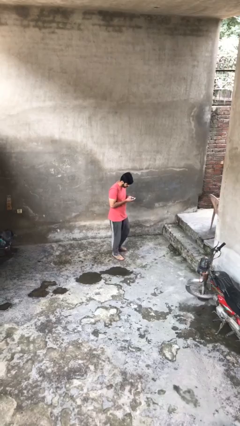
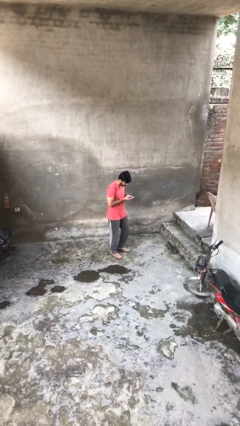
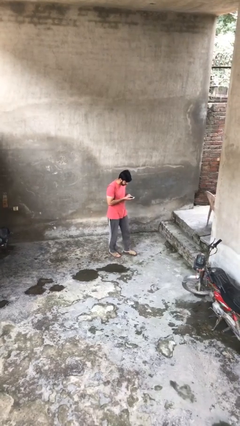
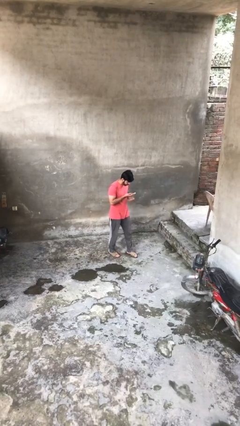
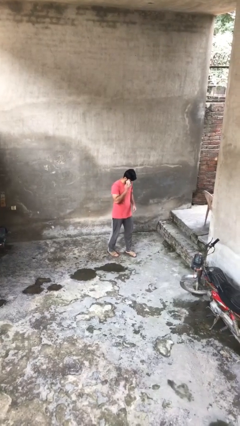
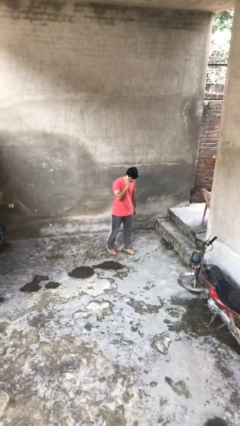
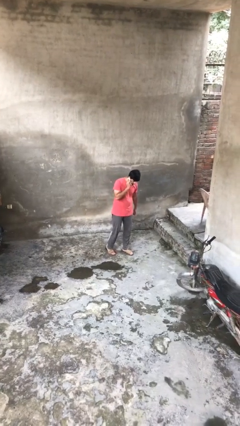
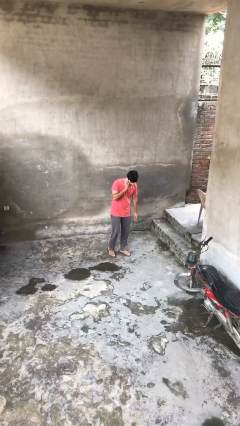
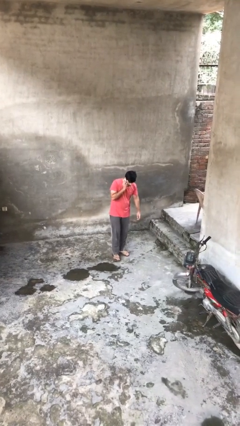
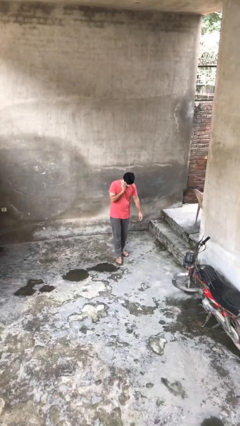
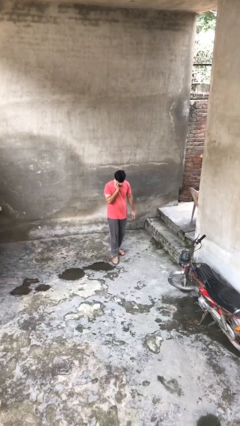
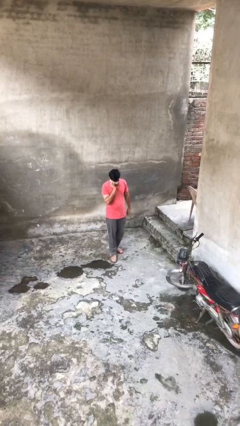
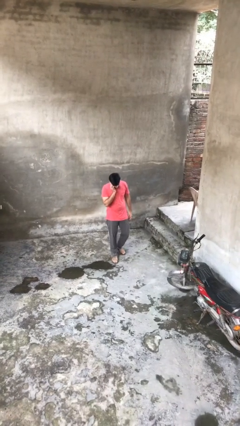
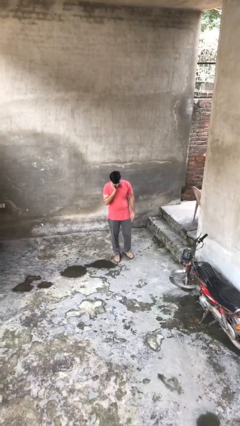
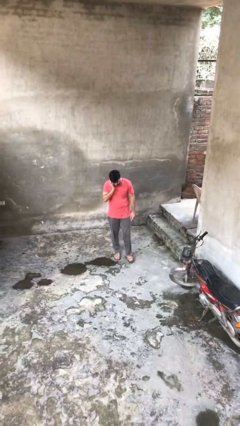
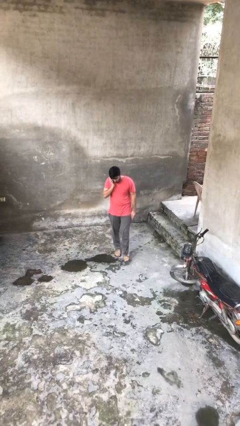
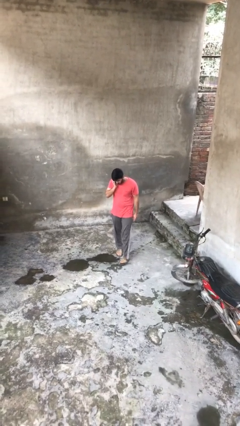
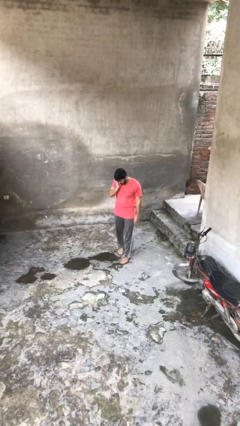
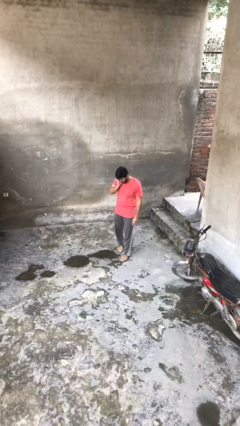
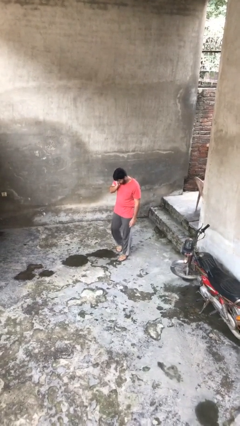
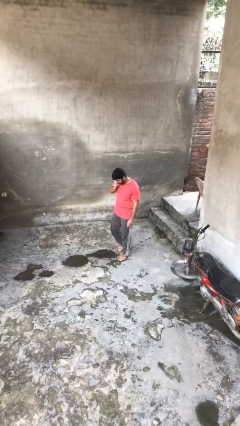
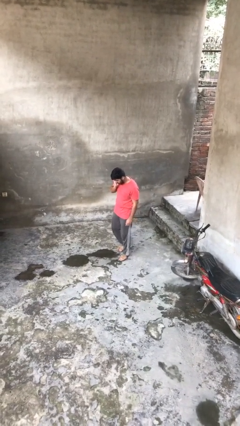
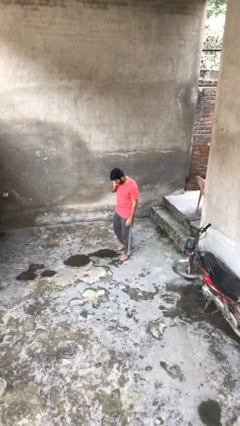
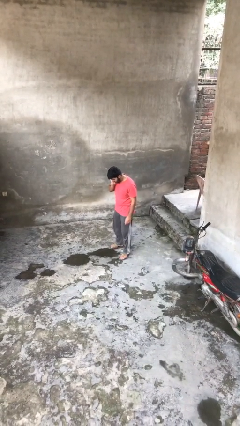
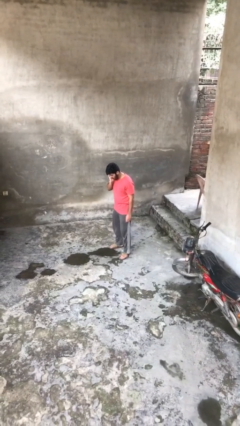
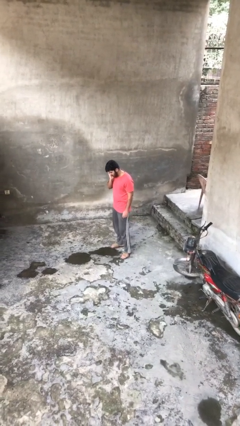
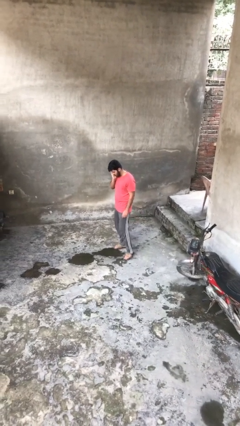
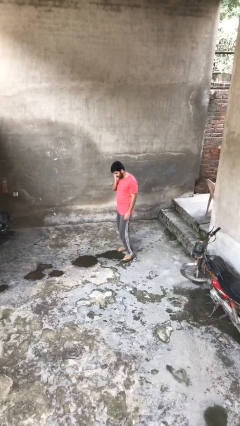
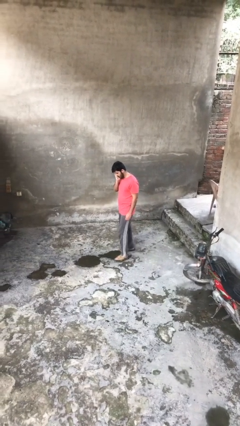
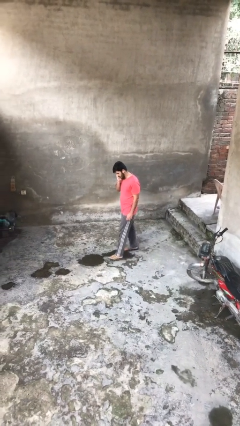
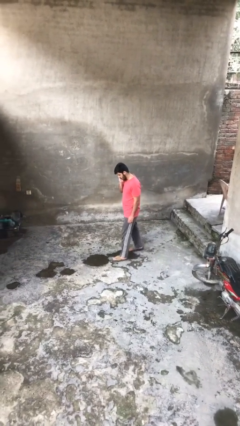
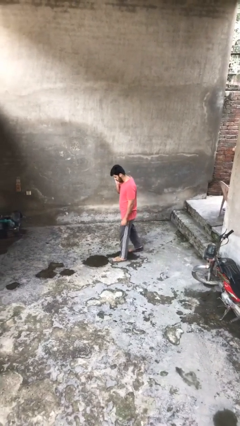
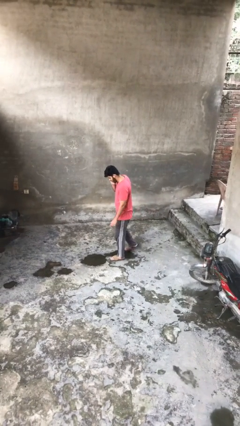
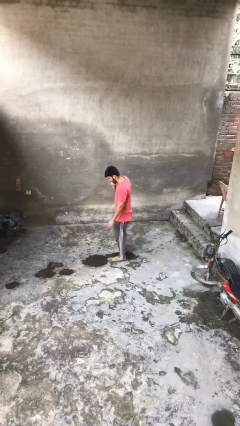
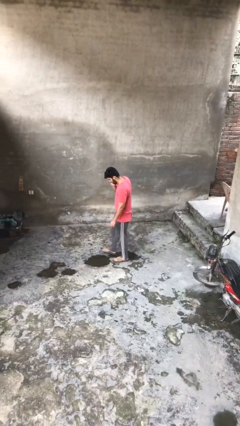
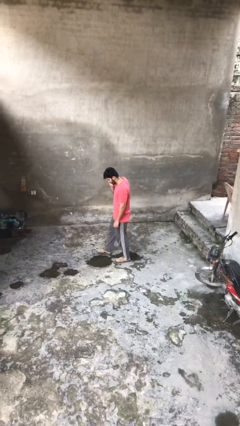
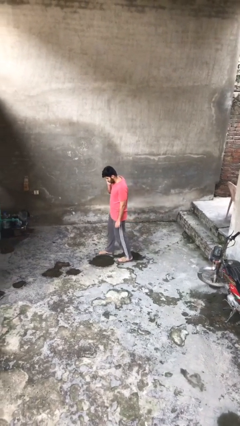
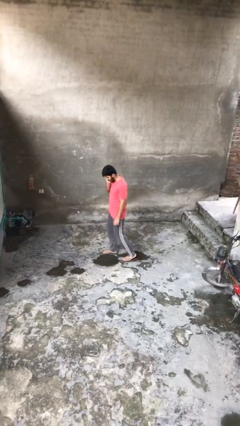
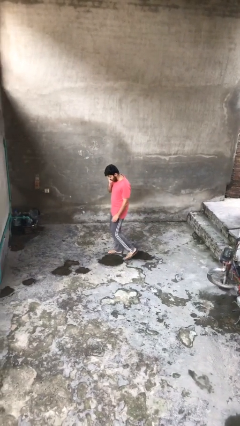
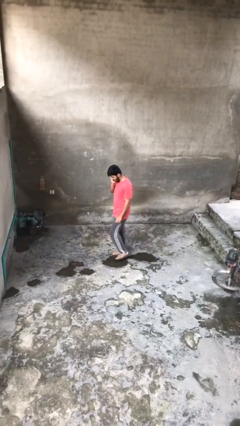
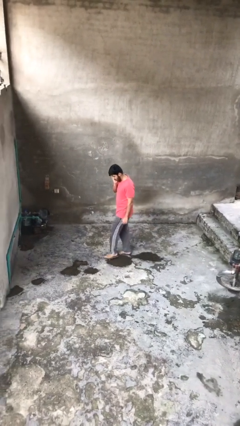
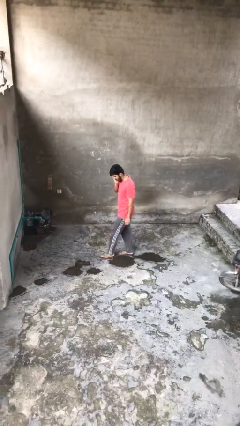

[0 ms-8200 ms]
person talks on phone

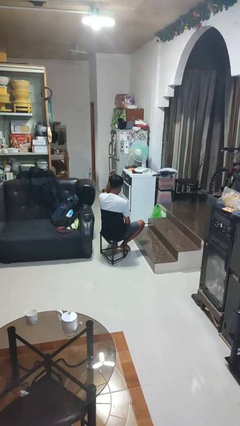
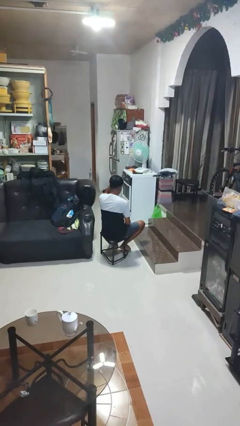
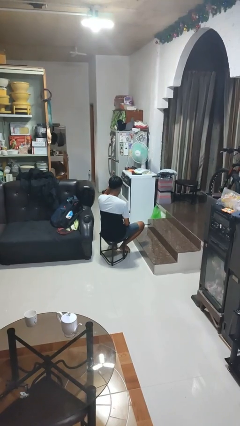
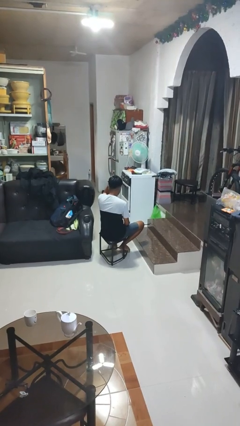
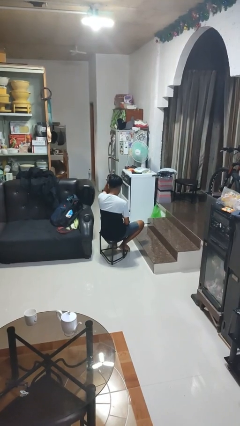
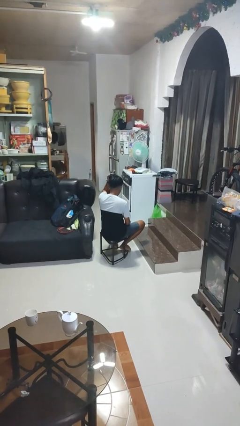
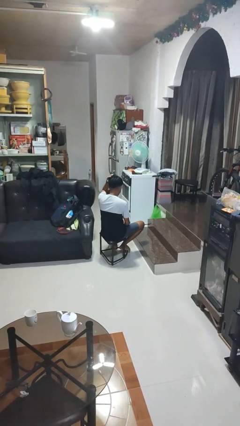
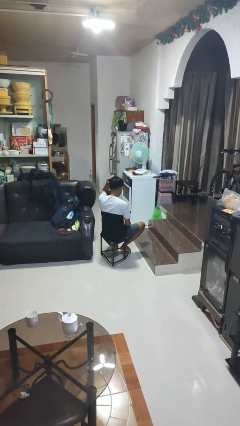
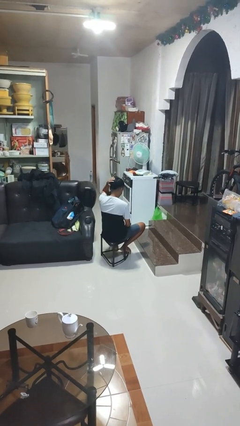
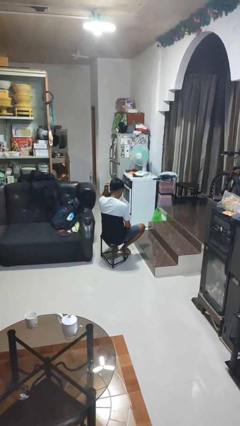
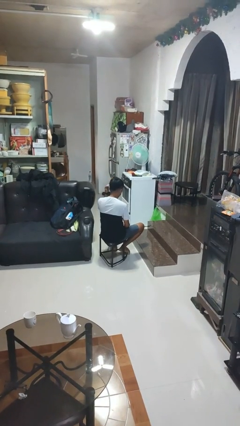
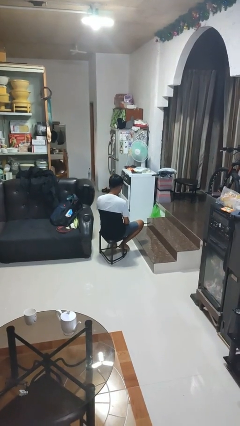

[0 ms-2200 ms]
person pats head

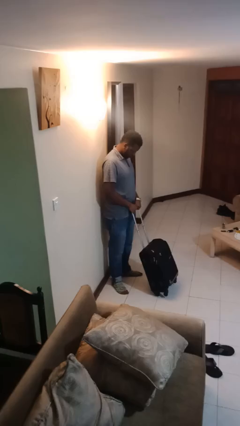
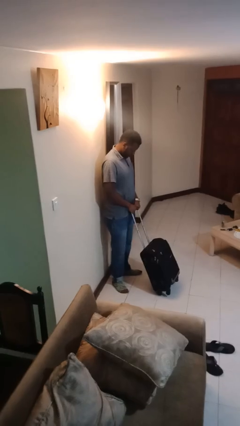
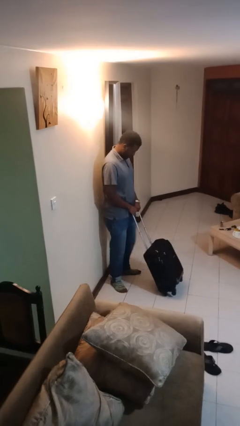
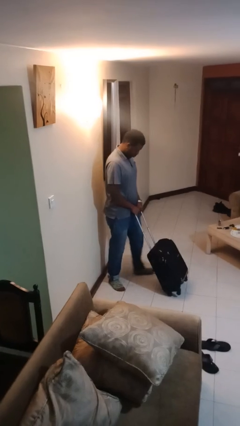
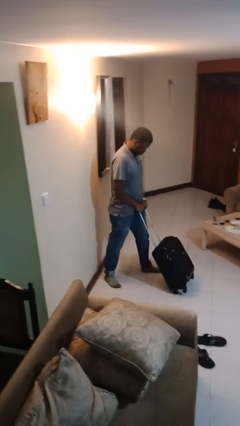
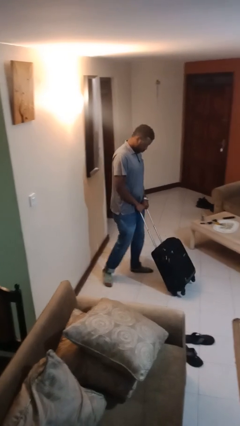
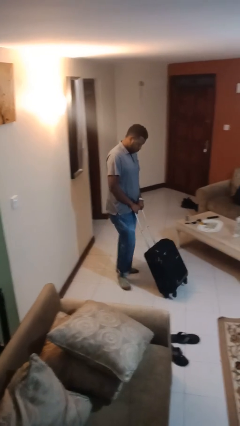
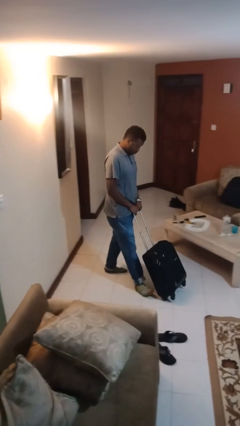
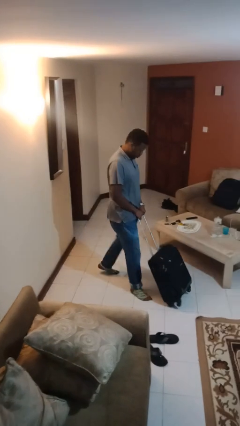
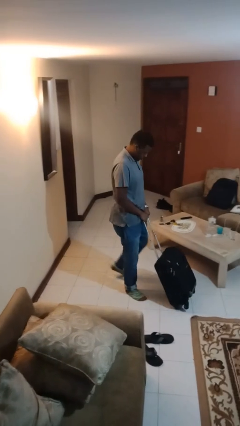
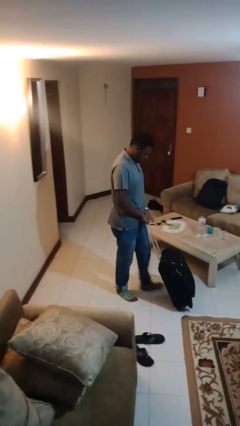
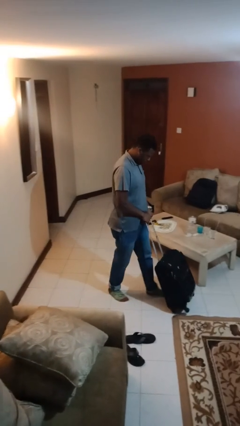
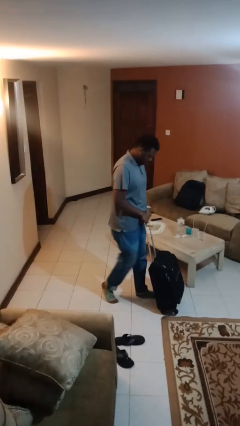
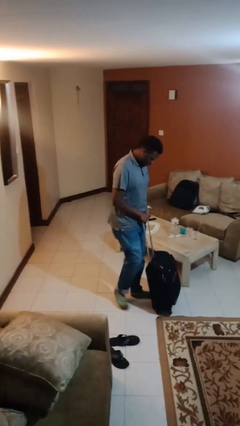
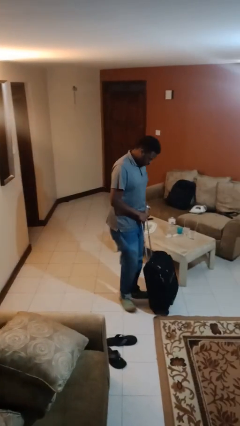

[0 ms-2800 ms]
person pushes wheeled cart

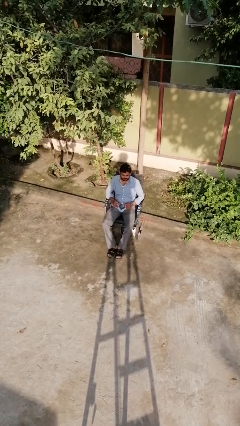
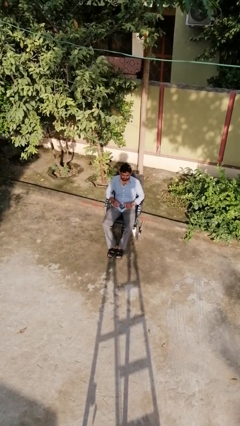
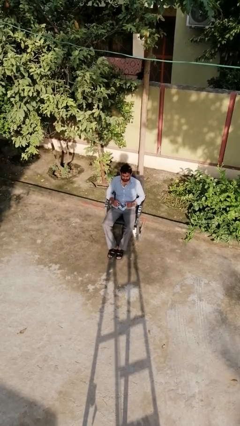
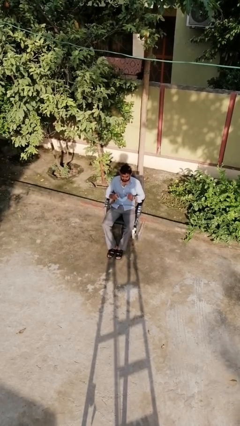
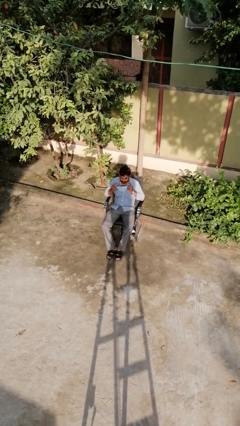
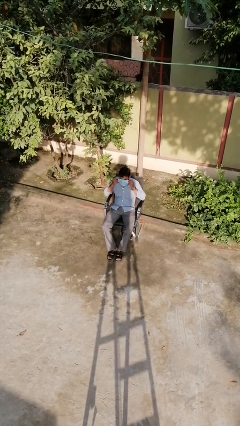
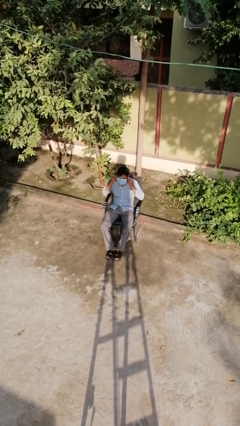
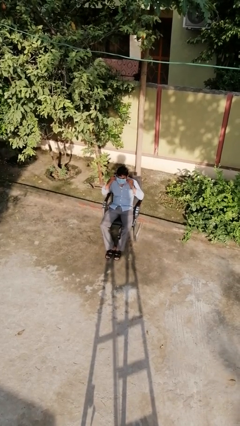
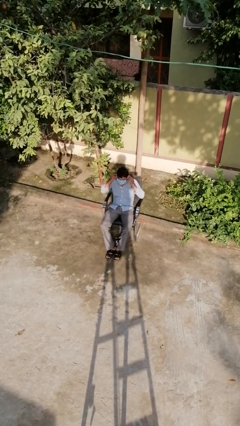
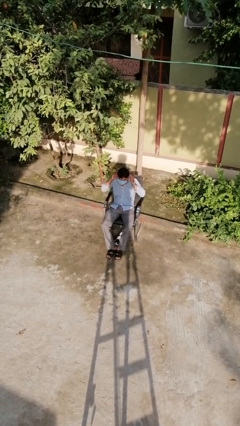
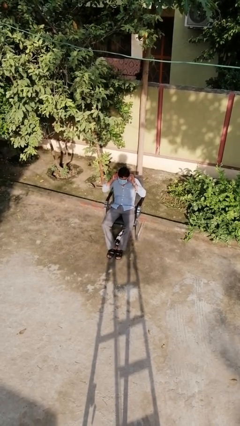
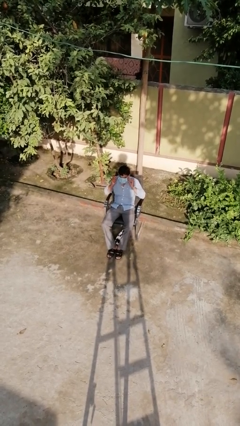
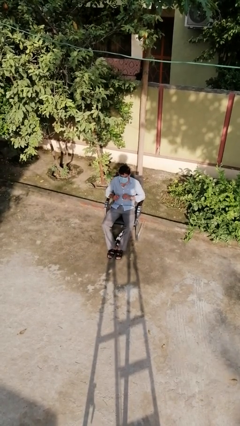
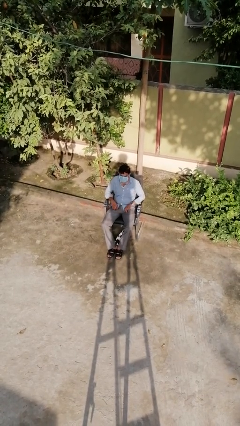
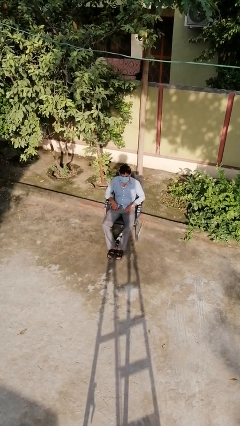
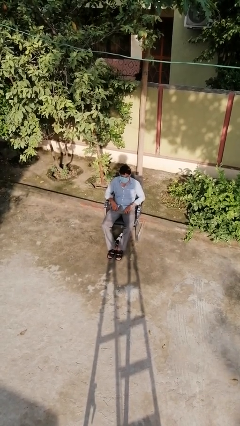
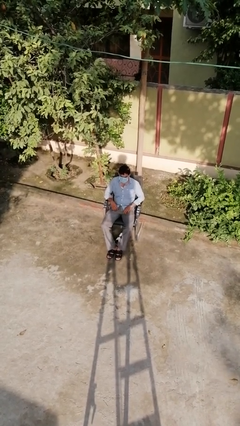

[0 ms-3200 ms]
person puts on facemask

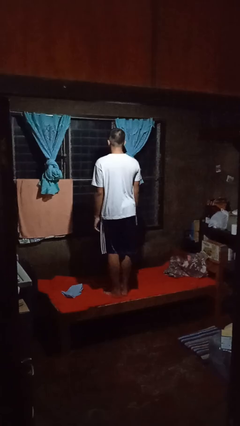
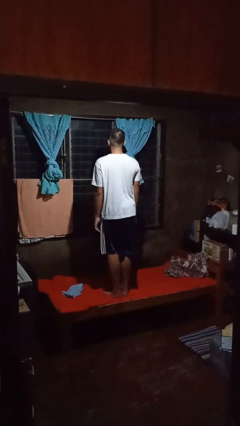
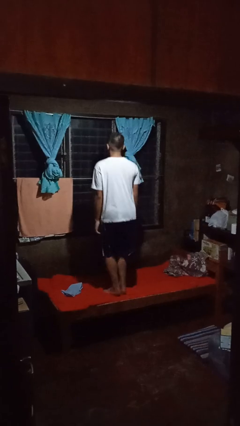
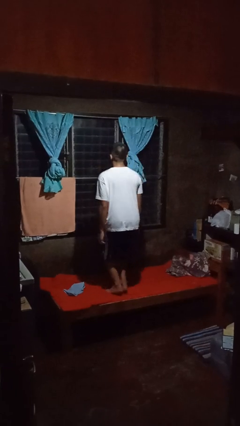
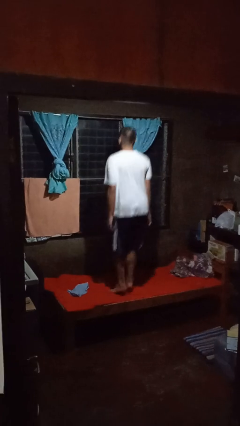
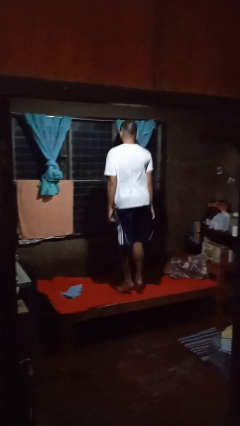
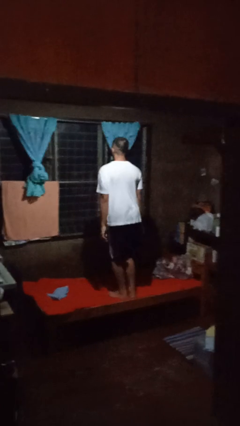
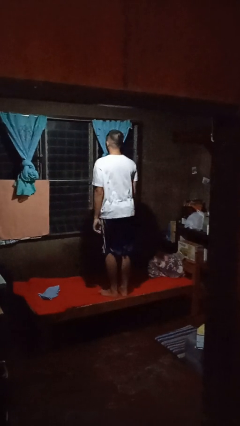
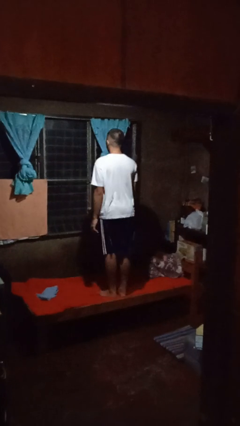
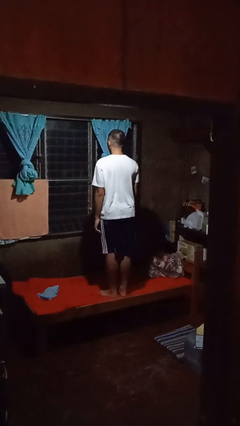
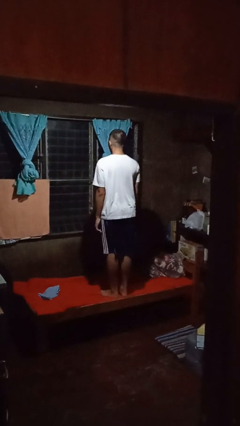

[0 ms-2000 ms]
person jumps on bed
